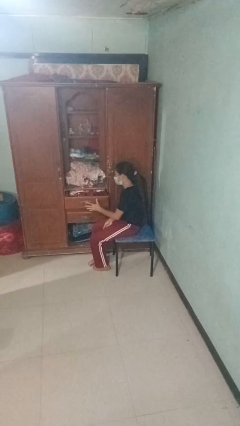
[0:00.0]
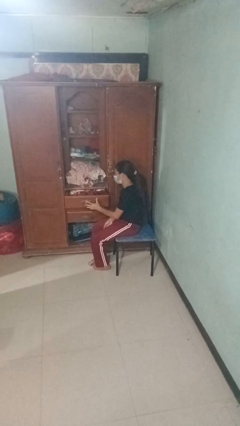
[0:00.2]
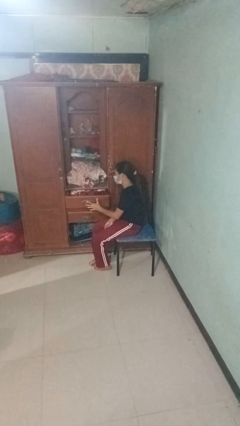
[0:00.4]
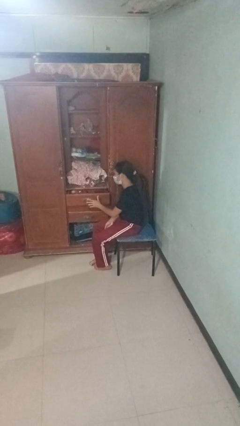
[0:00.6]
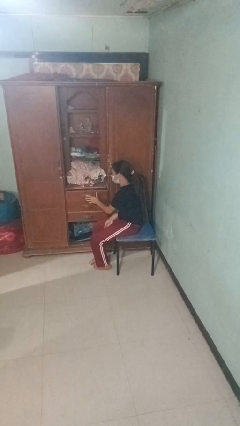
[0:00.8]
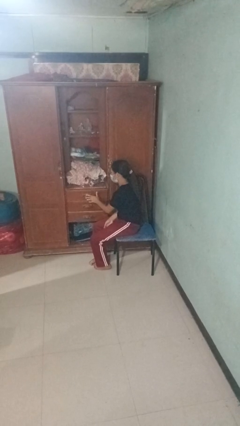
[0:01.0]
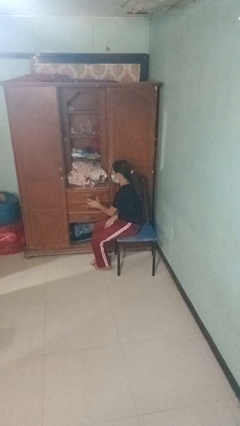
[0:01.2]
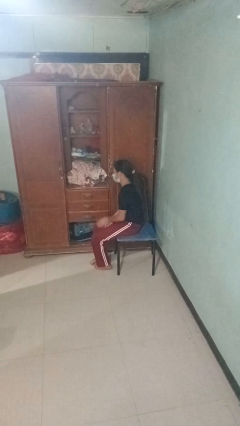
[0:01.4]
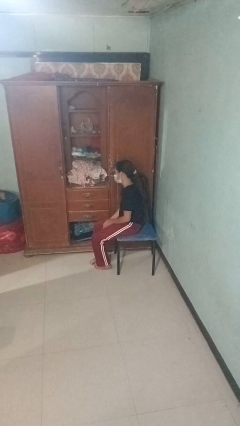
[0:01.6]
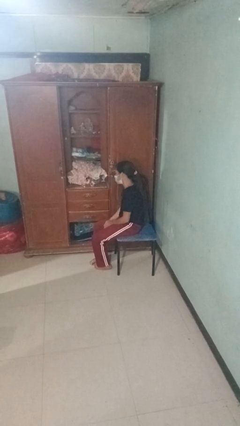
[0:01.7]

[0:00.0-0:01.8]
person closes dresser drawer

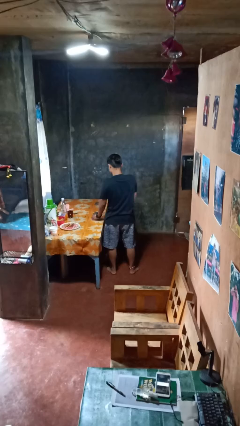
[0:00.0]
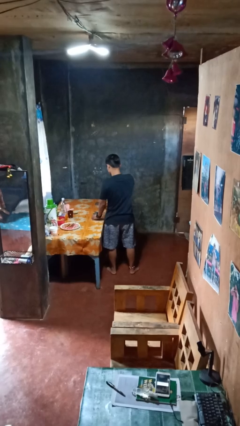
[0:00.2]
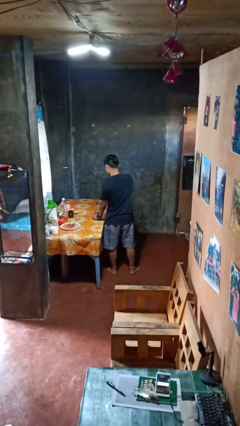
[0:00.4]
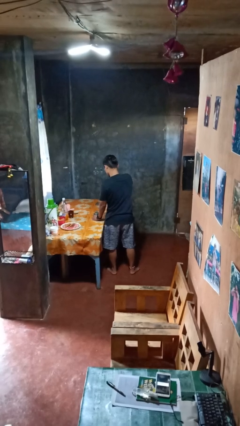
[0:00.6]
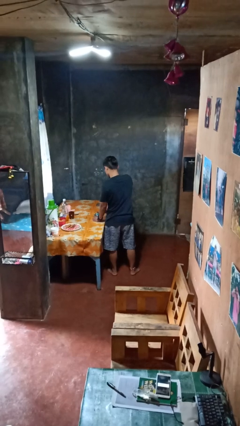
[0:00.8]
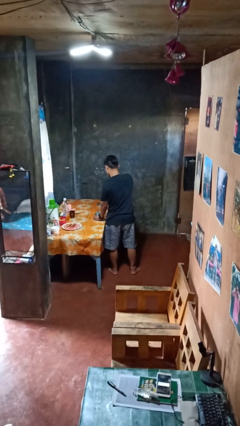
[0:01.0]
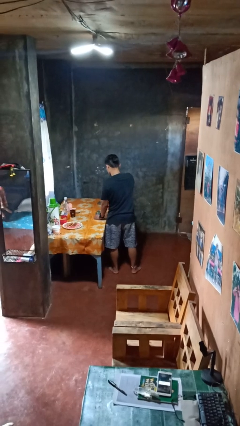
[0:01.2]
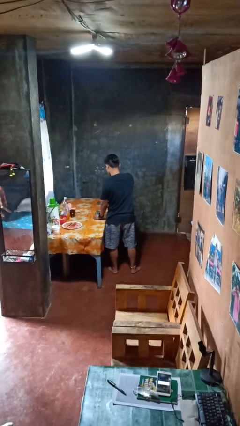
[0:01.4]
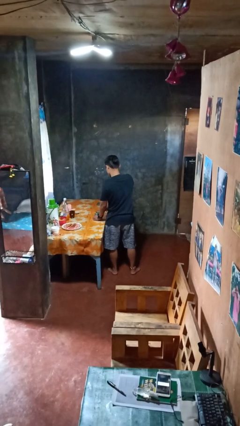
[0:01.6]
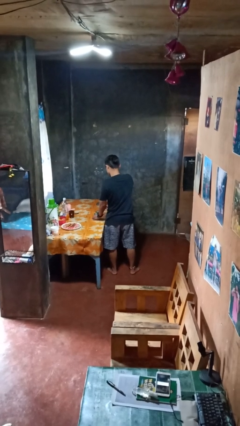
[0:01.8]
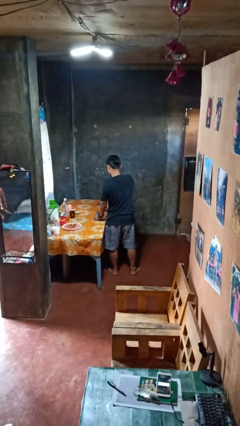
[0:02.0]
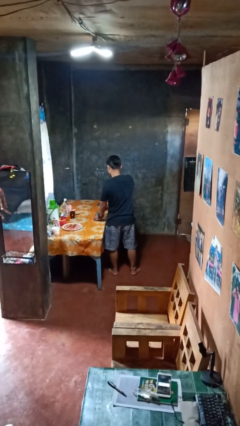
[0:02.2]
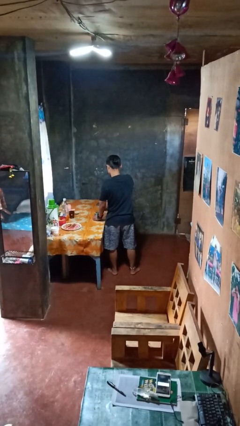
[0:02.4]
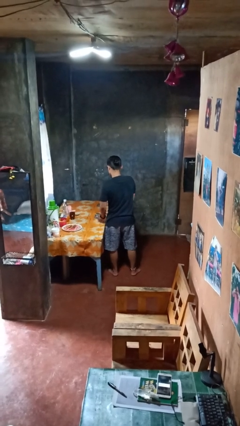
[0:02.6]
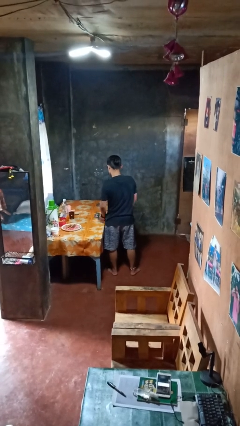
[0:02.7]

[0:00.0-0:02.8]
person opens can with can opener

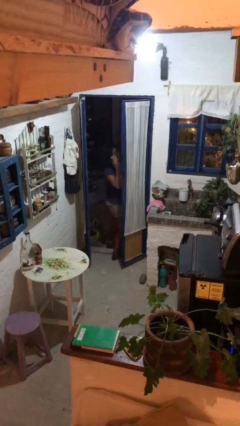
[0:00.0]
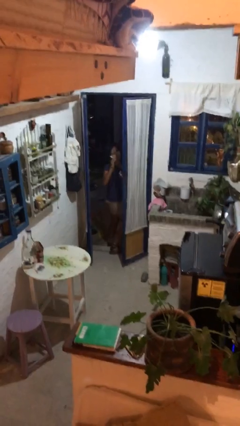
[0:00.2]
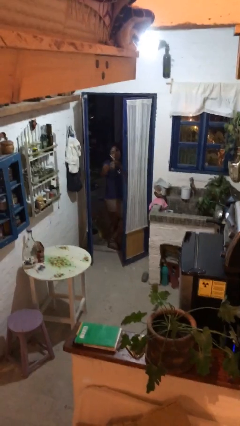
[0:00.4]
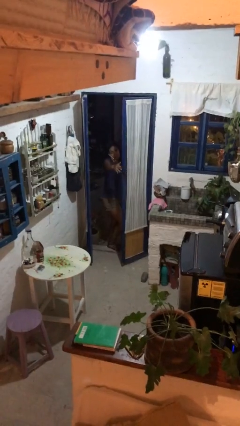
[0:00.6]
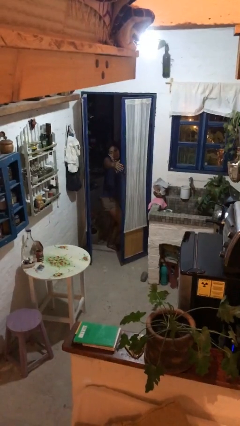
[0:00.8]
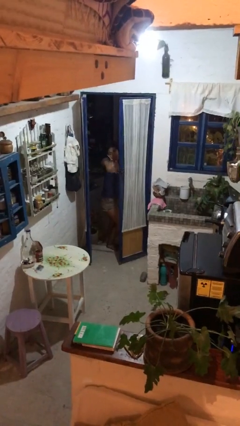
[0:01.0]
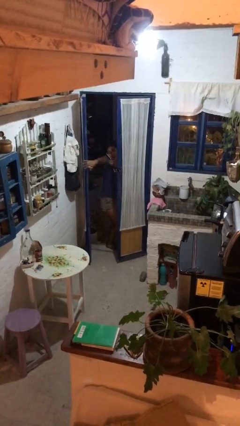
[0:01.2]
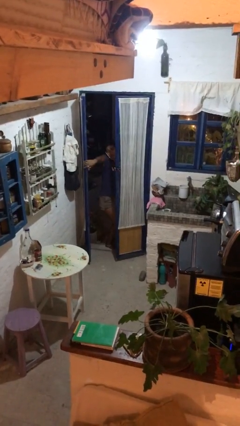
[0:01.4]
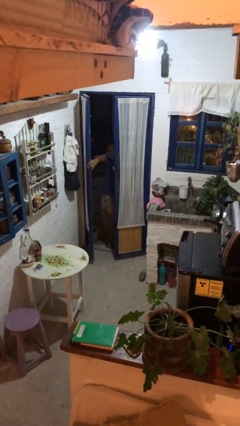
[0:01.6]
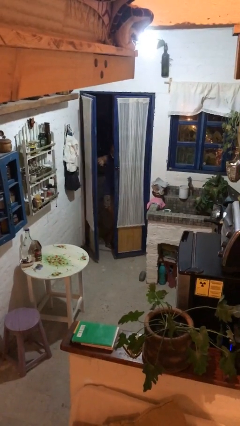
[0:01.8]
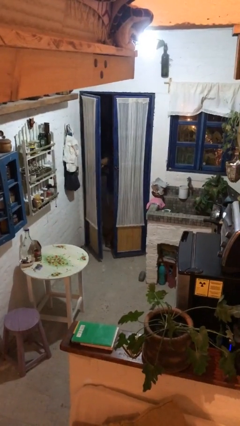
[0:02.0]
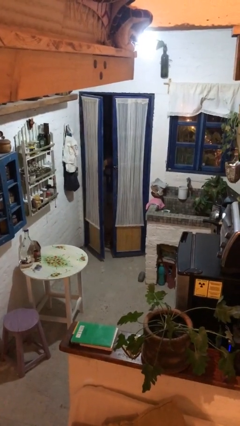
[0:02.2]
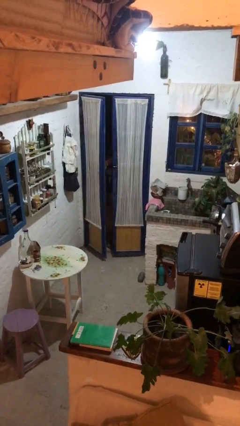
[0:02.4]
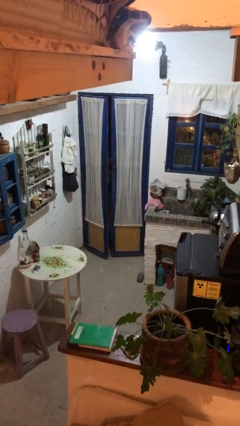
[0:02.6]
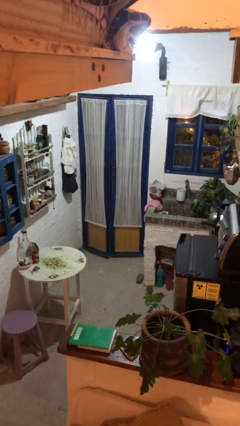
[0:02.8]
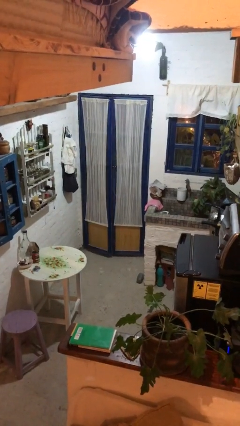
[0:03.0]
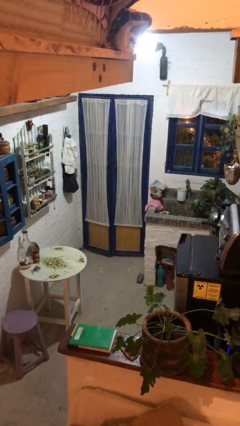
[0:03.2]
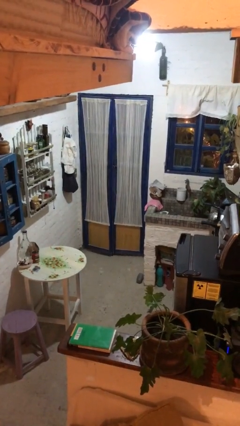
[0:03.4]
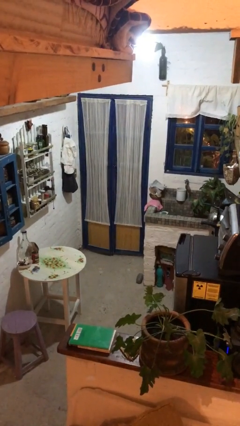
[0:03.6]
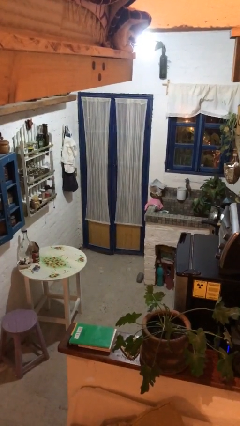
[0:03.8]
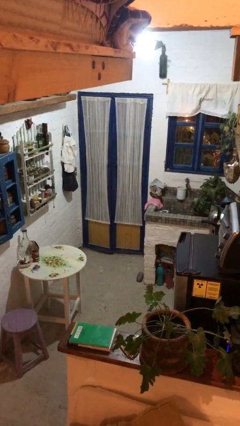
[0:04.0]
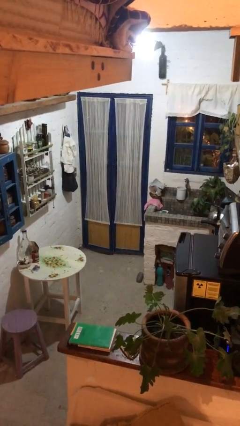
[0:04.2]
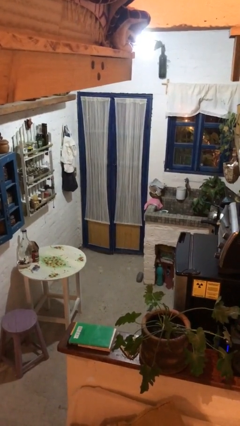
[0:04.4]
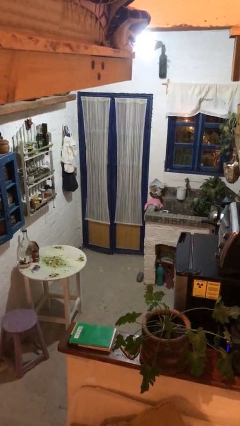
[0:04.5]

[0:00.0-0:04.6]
person closes facility door

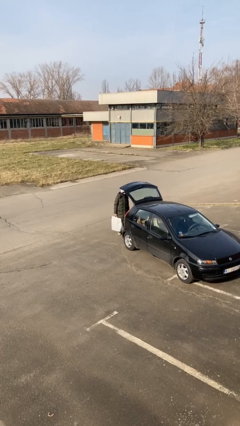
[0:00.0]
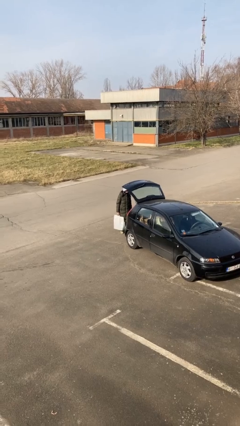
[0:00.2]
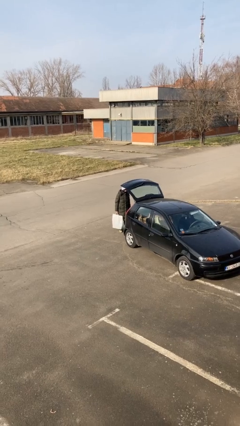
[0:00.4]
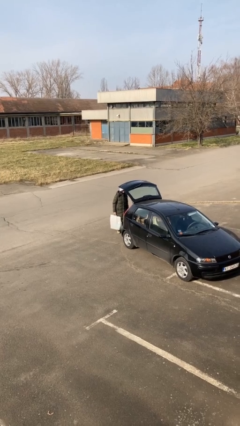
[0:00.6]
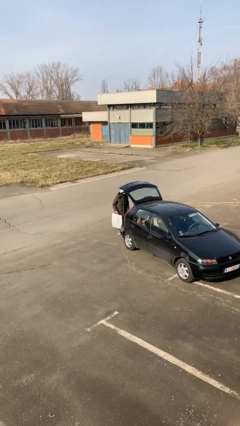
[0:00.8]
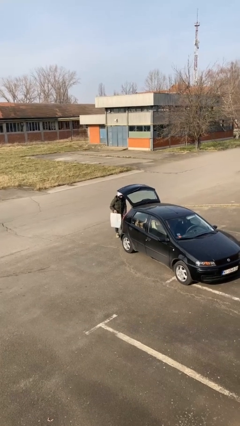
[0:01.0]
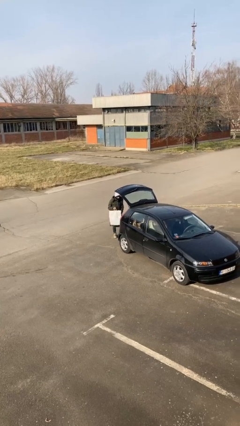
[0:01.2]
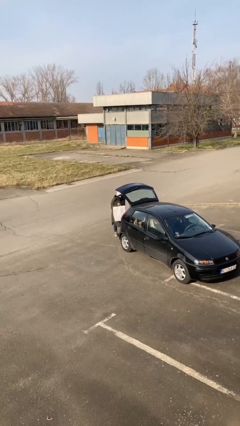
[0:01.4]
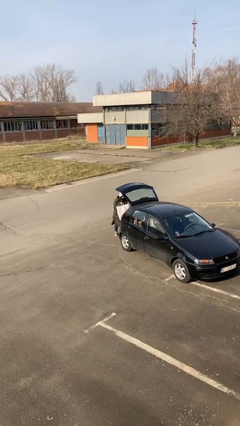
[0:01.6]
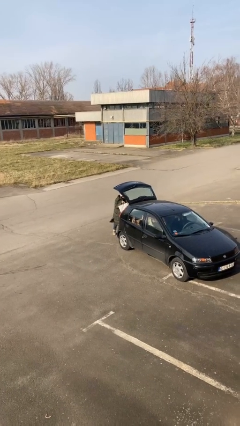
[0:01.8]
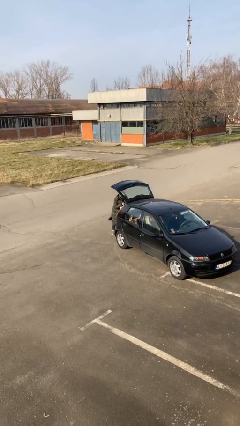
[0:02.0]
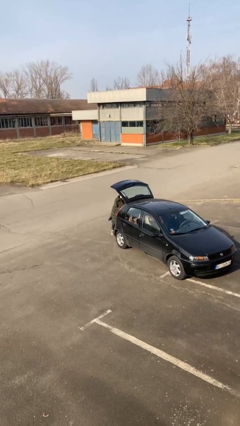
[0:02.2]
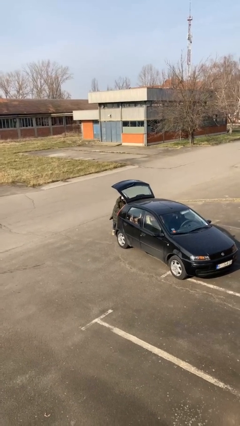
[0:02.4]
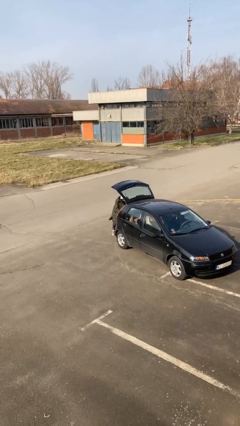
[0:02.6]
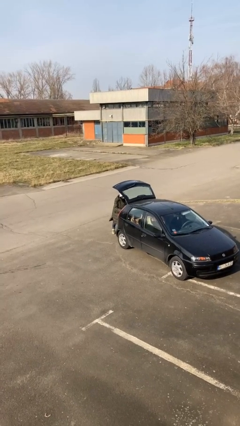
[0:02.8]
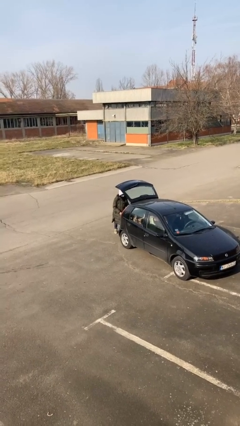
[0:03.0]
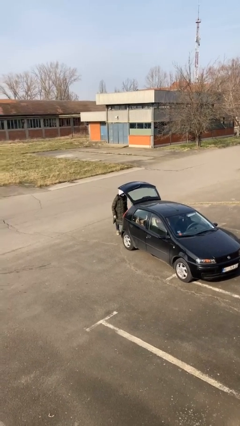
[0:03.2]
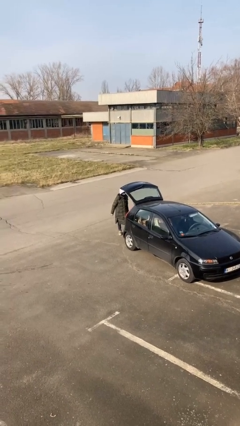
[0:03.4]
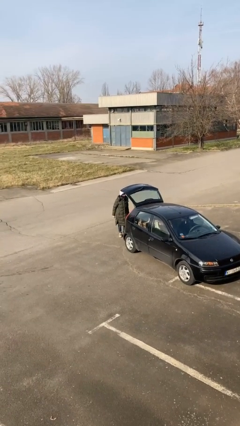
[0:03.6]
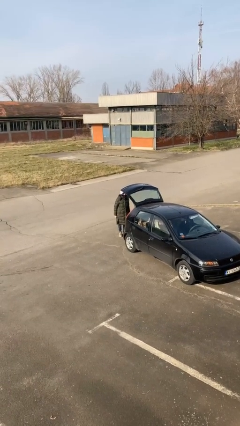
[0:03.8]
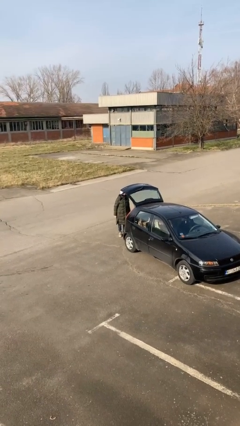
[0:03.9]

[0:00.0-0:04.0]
person loads car

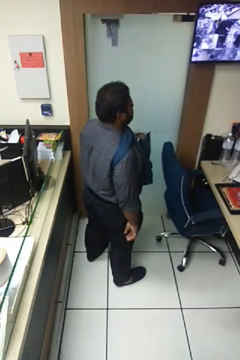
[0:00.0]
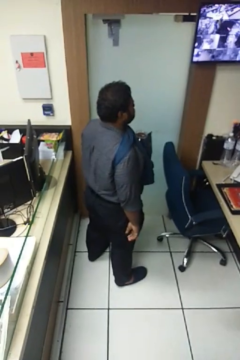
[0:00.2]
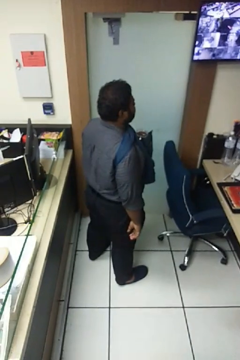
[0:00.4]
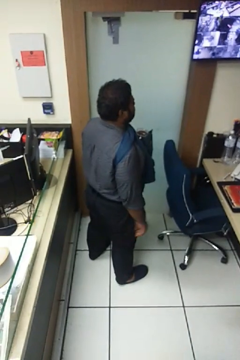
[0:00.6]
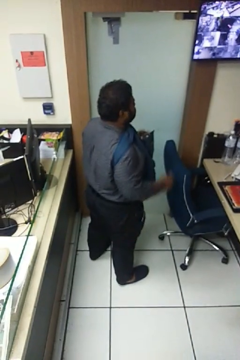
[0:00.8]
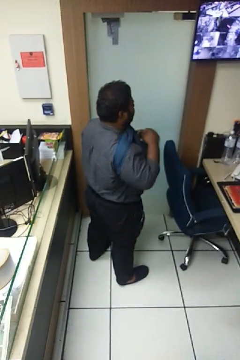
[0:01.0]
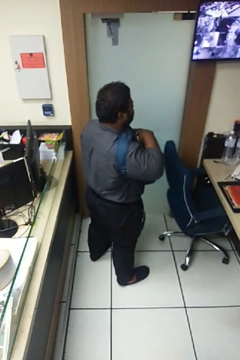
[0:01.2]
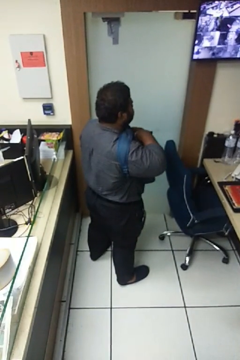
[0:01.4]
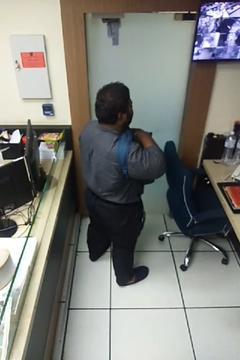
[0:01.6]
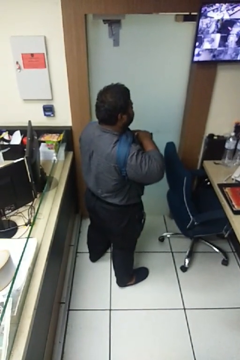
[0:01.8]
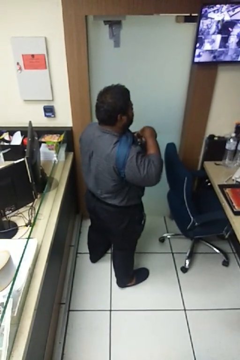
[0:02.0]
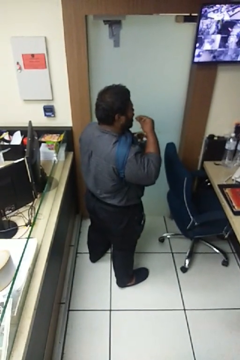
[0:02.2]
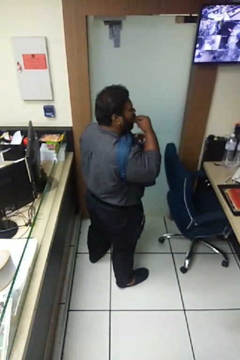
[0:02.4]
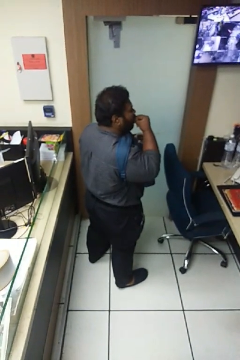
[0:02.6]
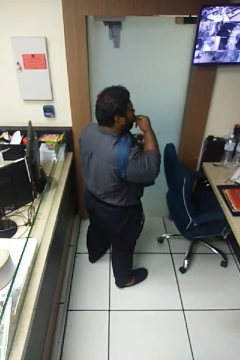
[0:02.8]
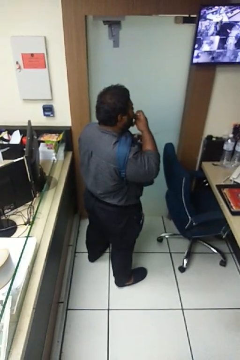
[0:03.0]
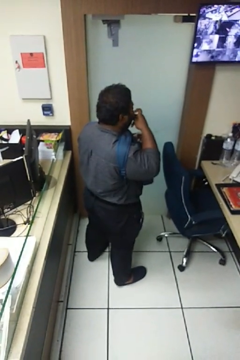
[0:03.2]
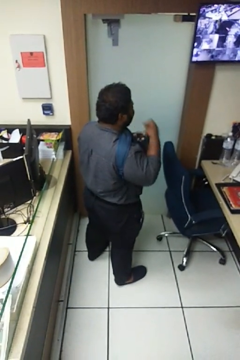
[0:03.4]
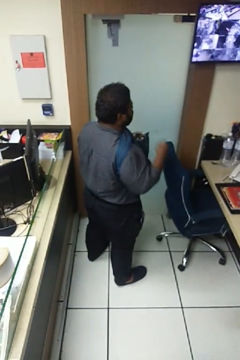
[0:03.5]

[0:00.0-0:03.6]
person eats snack from bag

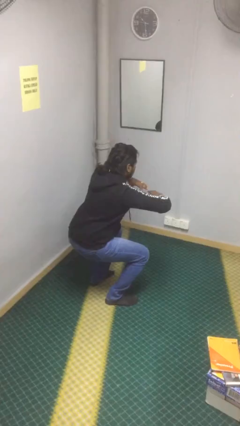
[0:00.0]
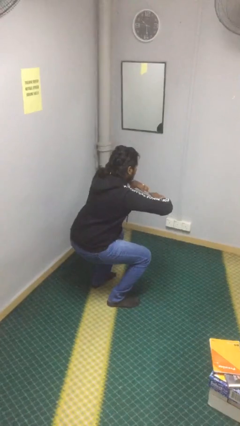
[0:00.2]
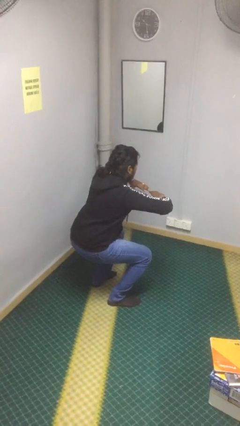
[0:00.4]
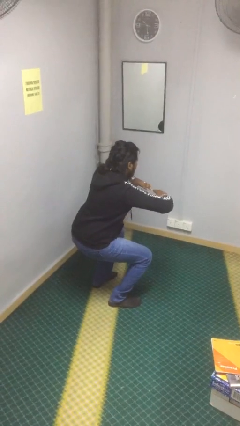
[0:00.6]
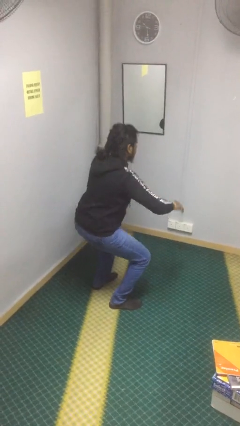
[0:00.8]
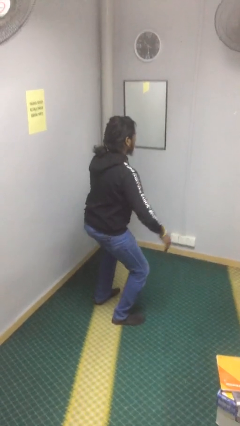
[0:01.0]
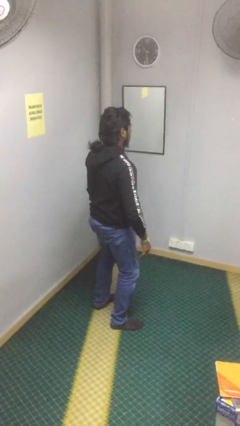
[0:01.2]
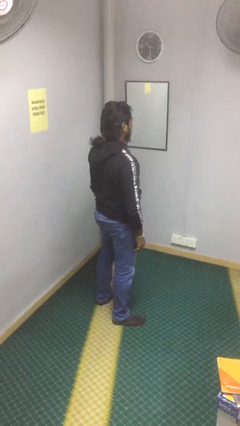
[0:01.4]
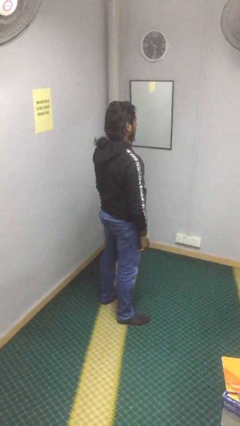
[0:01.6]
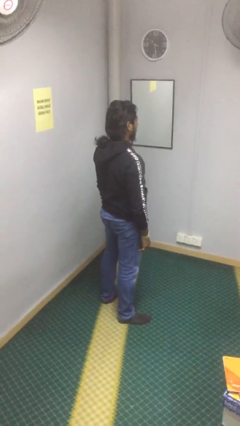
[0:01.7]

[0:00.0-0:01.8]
person stands up
